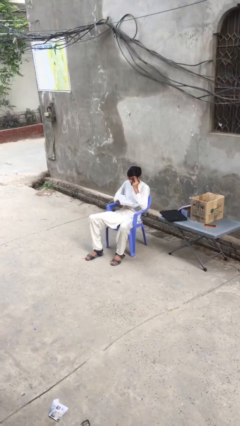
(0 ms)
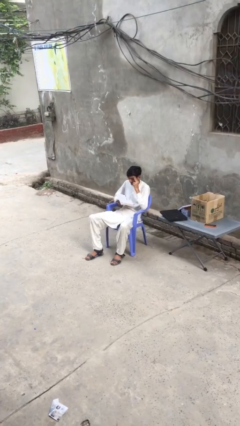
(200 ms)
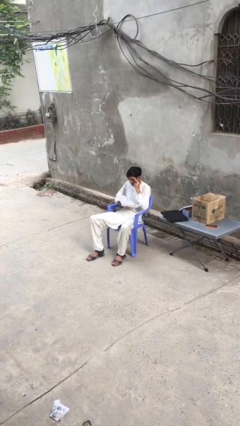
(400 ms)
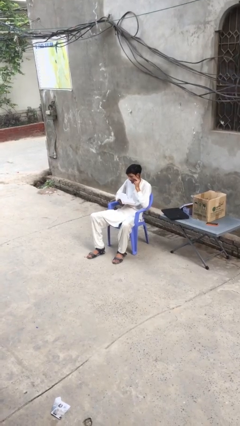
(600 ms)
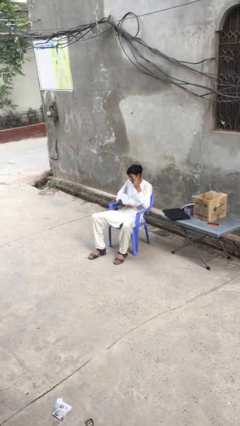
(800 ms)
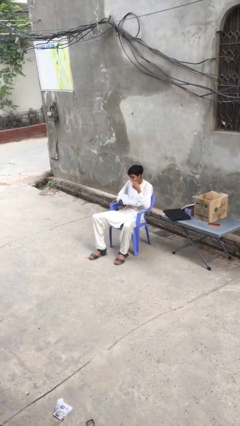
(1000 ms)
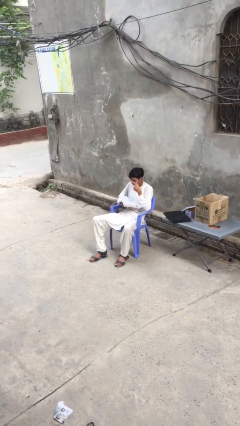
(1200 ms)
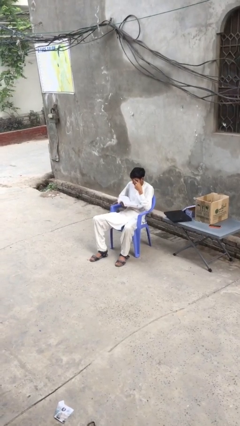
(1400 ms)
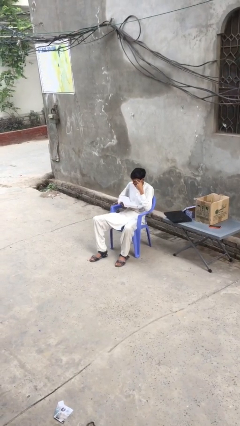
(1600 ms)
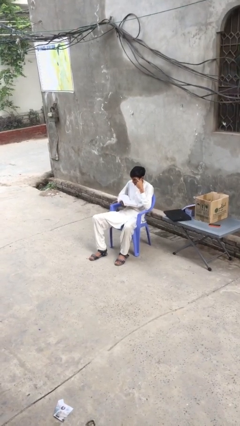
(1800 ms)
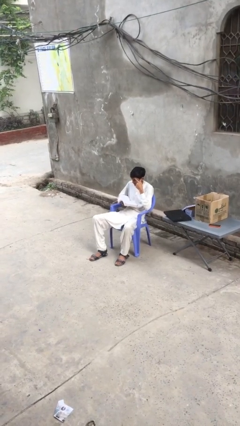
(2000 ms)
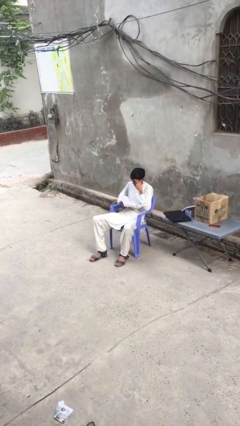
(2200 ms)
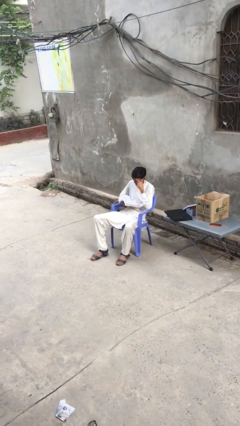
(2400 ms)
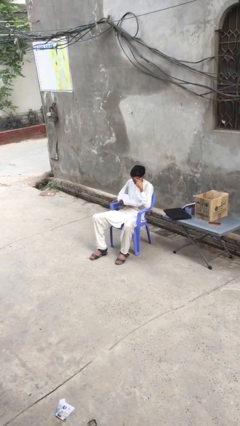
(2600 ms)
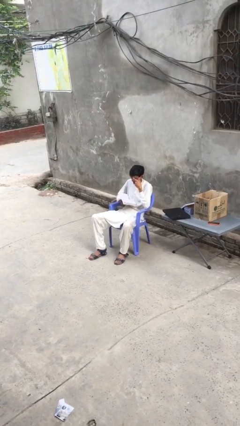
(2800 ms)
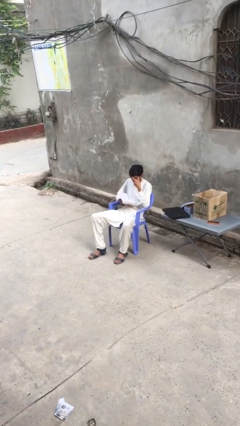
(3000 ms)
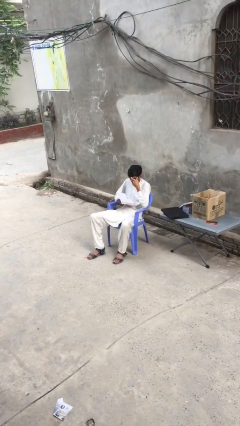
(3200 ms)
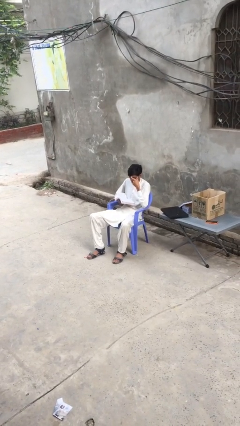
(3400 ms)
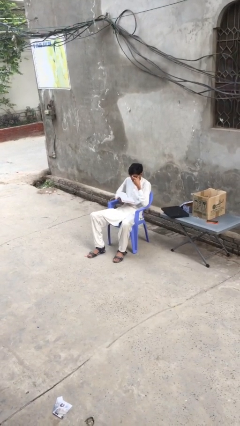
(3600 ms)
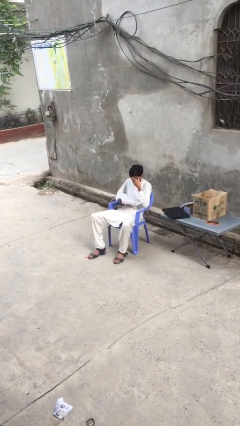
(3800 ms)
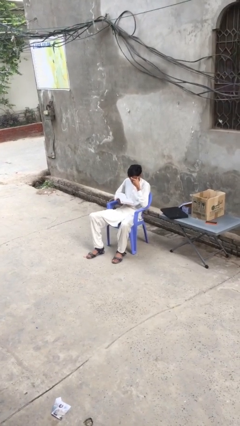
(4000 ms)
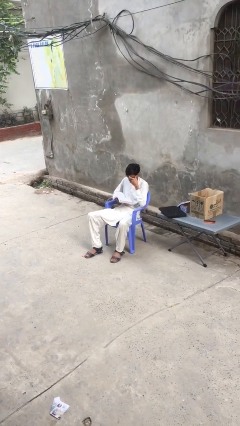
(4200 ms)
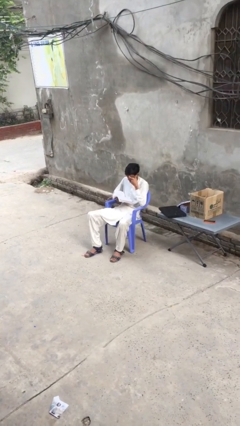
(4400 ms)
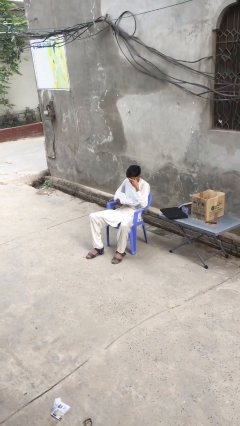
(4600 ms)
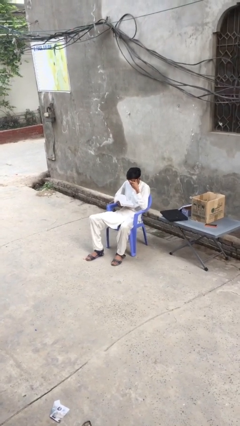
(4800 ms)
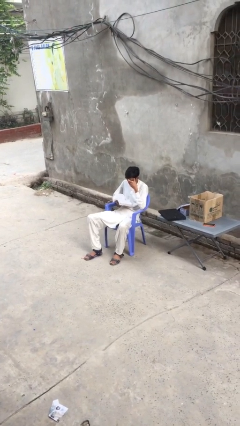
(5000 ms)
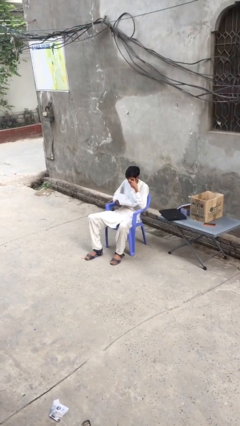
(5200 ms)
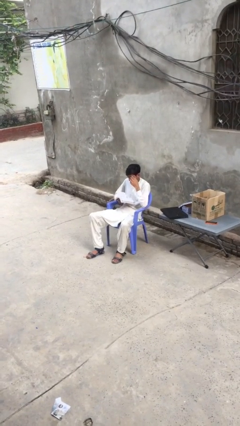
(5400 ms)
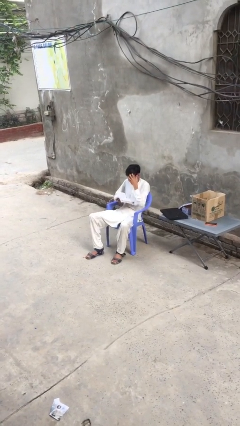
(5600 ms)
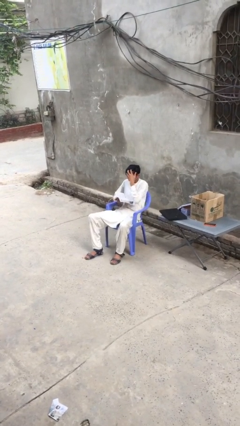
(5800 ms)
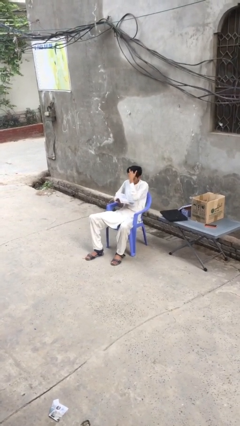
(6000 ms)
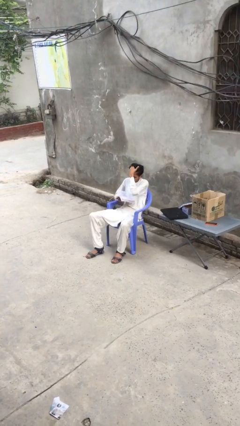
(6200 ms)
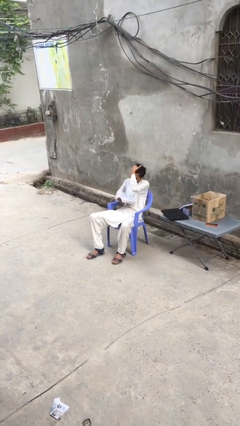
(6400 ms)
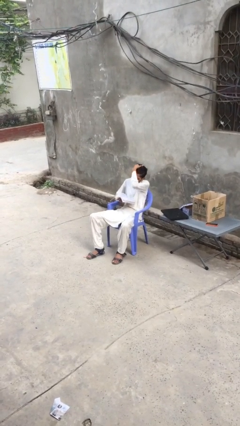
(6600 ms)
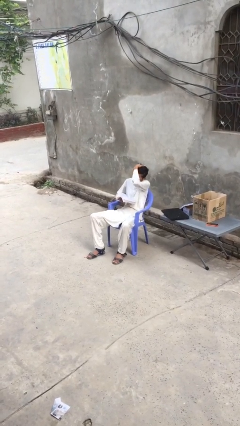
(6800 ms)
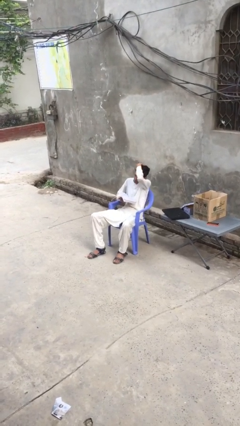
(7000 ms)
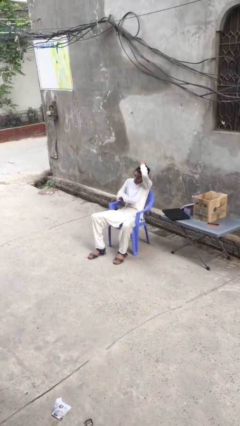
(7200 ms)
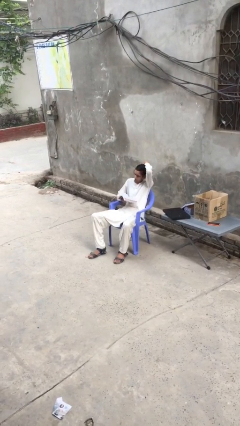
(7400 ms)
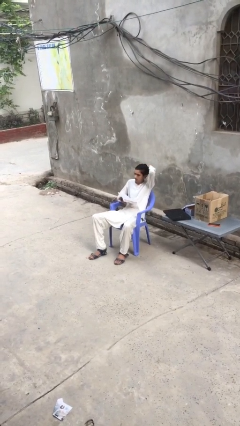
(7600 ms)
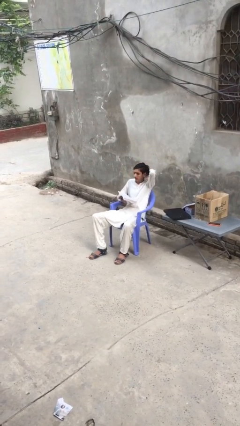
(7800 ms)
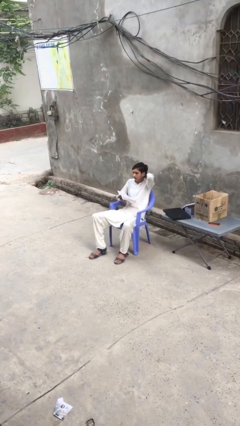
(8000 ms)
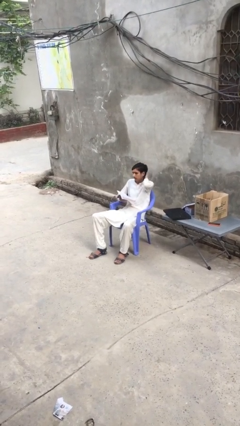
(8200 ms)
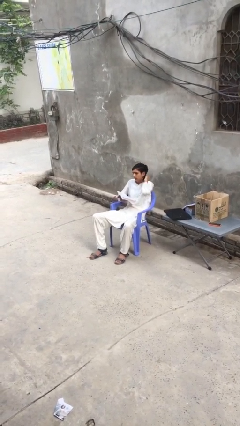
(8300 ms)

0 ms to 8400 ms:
person reads document

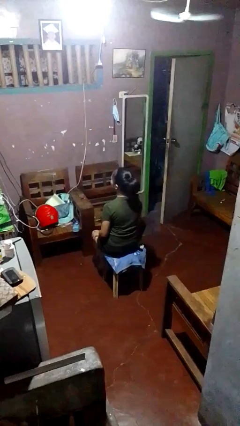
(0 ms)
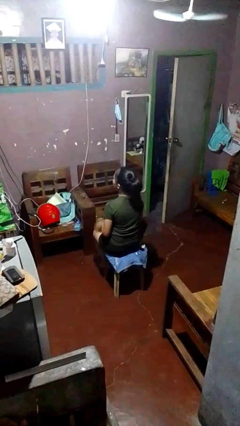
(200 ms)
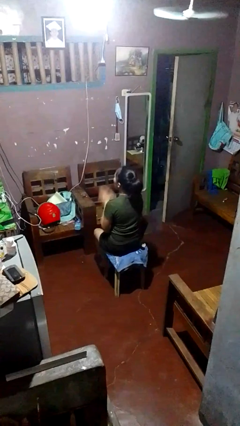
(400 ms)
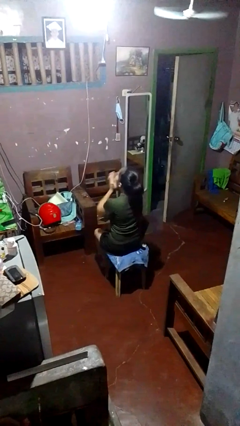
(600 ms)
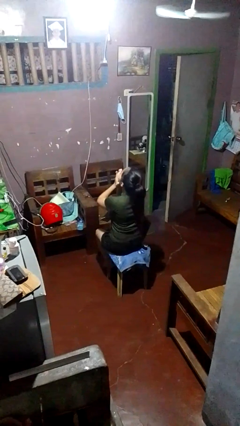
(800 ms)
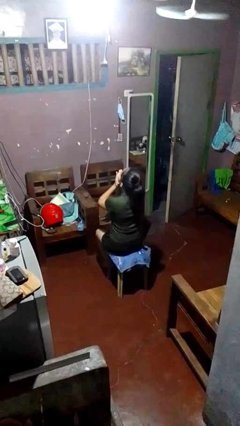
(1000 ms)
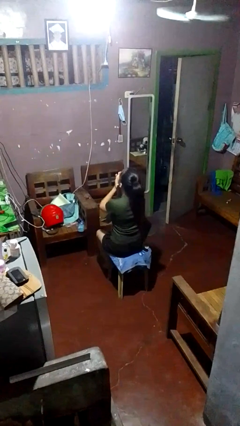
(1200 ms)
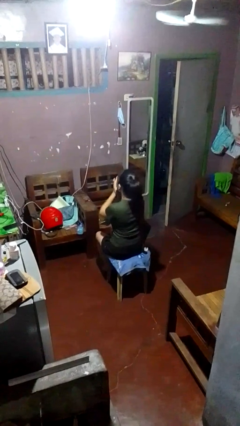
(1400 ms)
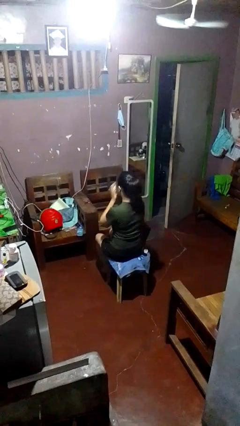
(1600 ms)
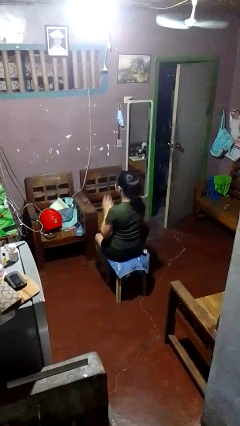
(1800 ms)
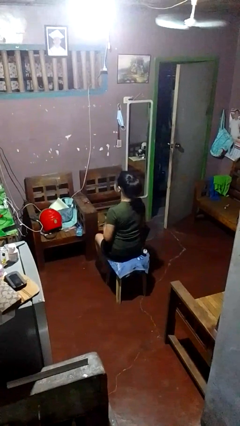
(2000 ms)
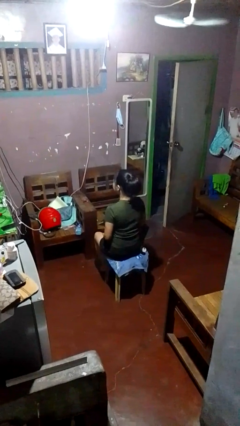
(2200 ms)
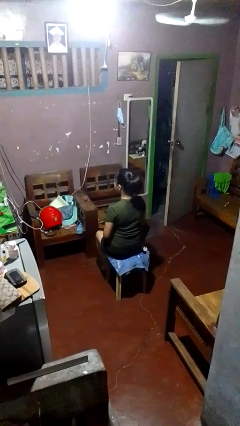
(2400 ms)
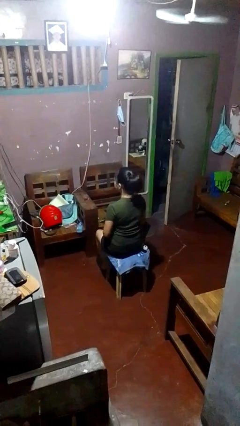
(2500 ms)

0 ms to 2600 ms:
person yawns

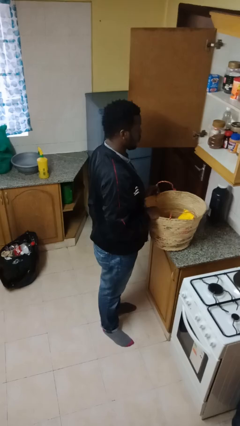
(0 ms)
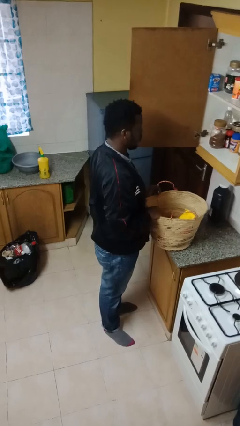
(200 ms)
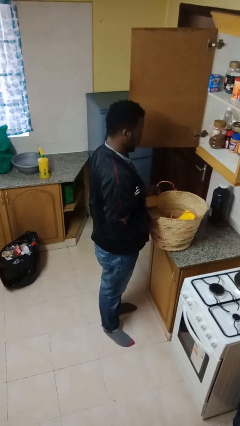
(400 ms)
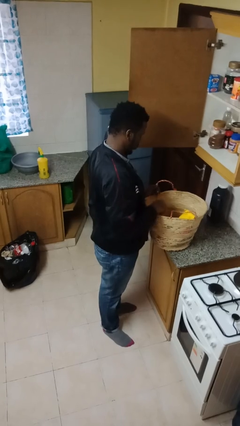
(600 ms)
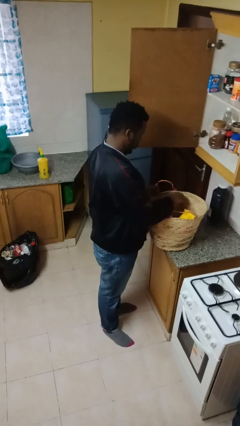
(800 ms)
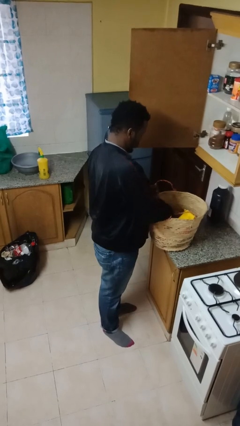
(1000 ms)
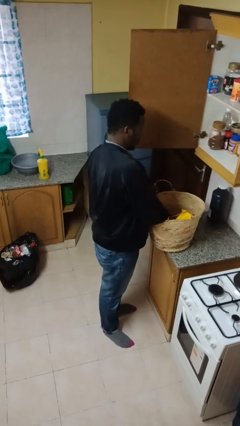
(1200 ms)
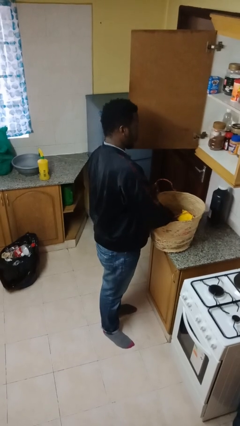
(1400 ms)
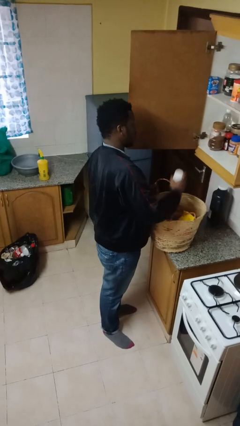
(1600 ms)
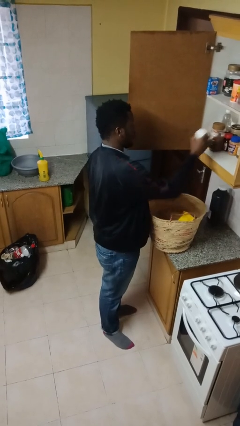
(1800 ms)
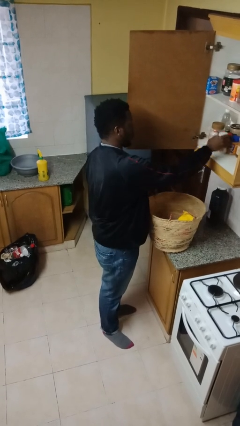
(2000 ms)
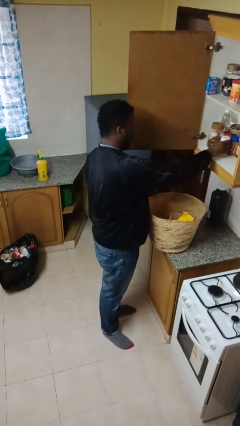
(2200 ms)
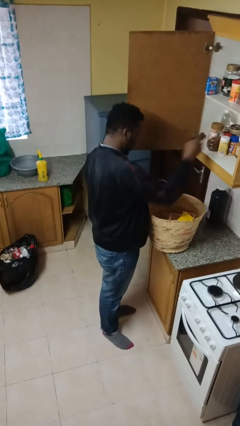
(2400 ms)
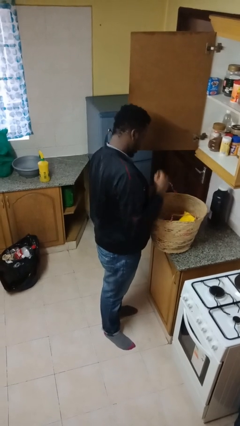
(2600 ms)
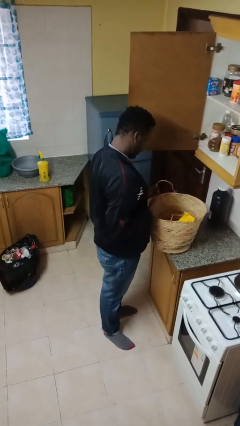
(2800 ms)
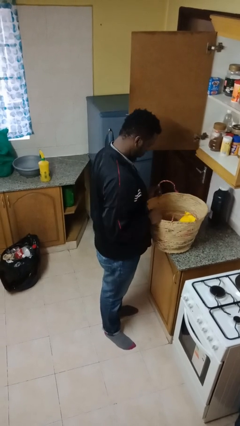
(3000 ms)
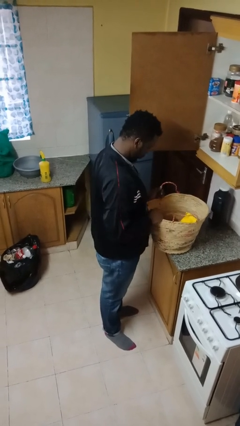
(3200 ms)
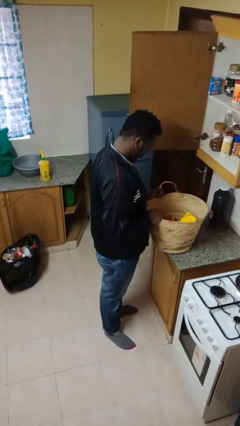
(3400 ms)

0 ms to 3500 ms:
person loads groceries into cabinet

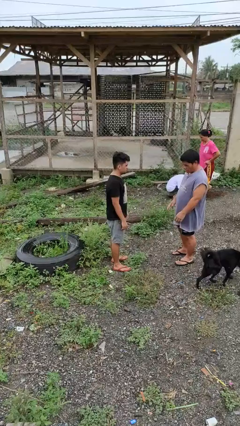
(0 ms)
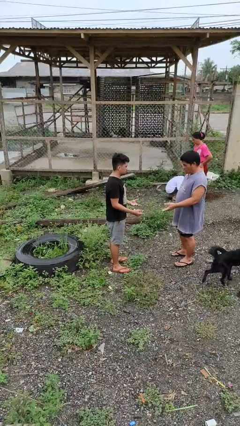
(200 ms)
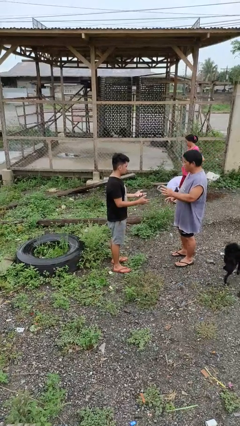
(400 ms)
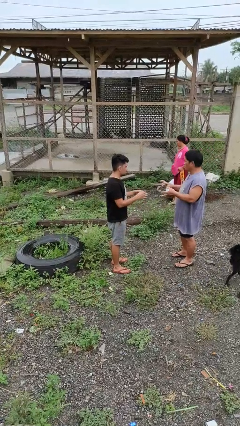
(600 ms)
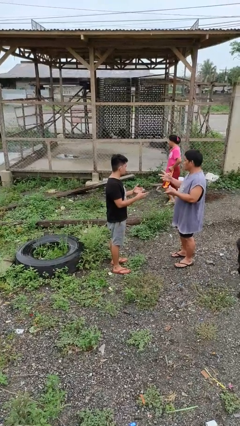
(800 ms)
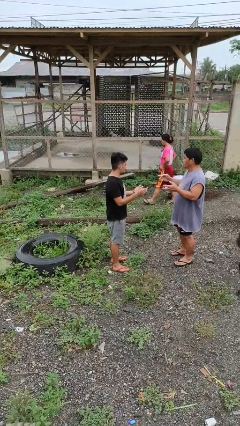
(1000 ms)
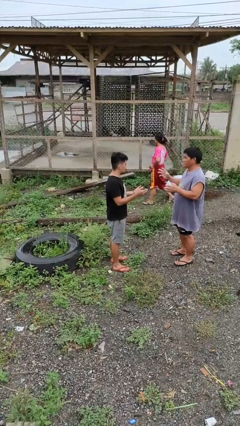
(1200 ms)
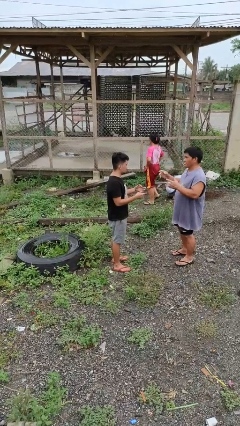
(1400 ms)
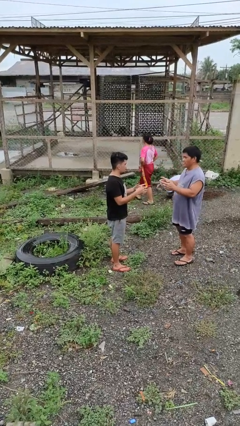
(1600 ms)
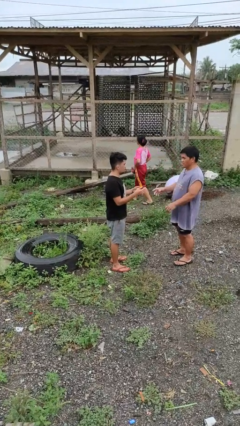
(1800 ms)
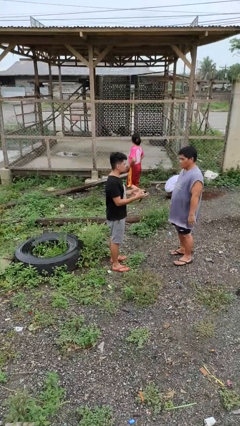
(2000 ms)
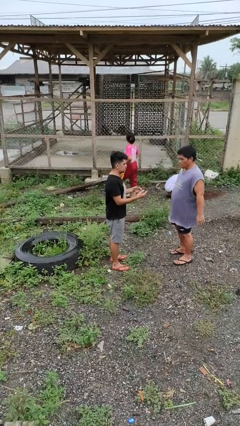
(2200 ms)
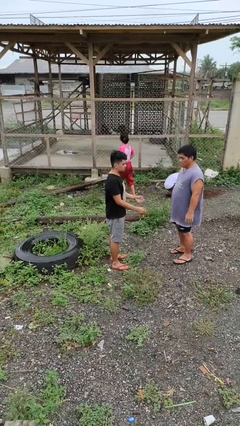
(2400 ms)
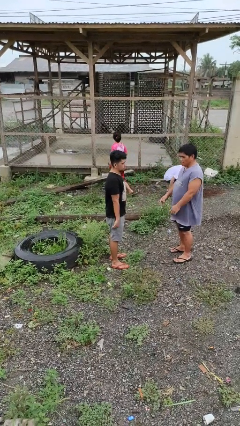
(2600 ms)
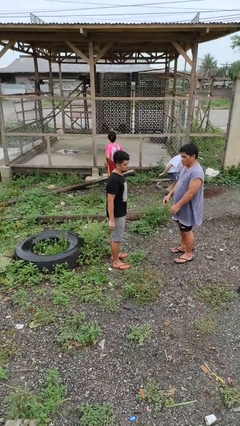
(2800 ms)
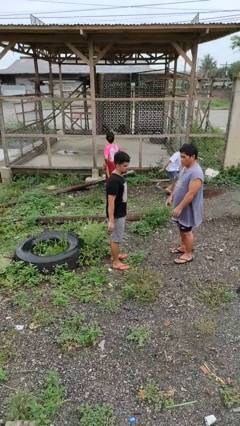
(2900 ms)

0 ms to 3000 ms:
person talks to person

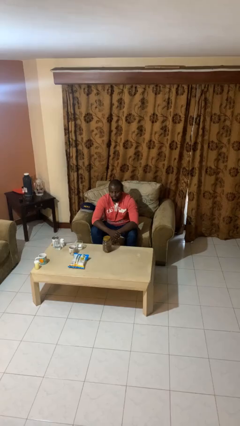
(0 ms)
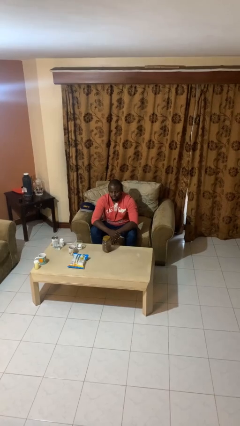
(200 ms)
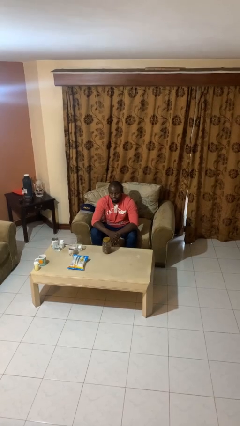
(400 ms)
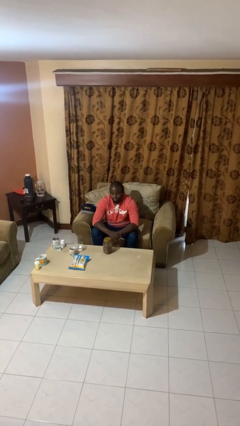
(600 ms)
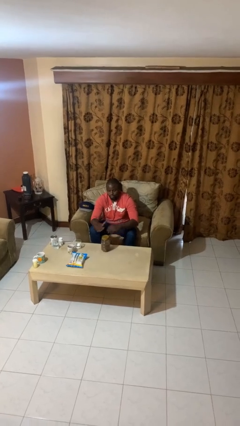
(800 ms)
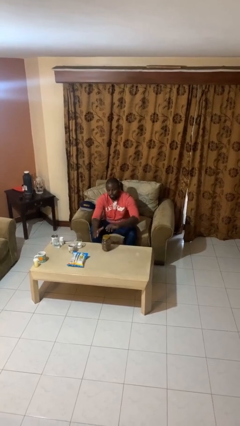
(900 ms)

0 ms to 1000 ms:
person closes jar
